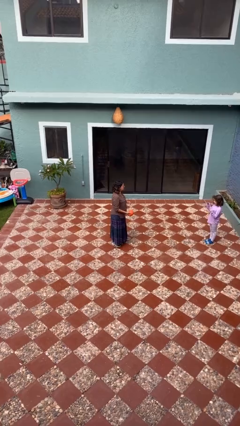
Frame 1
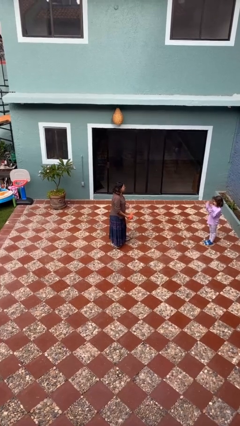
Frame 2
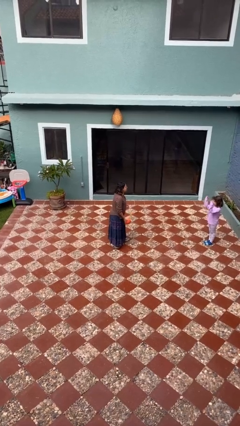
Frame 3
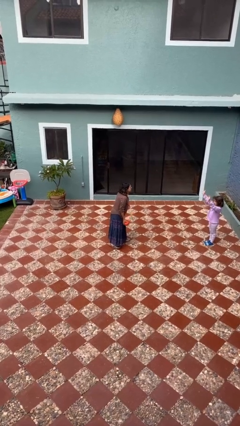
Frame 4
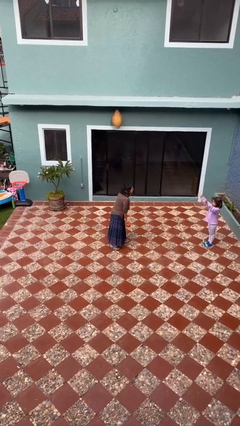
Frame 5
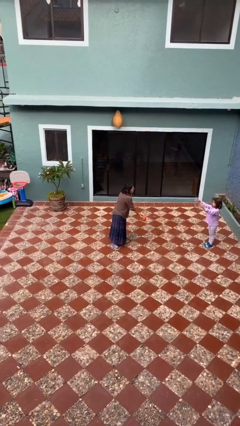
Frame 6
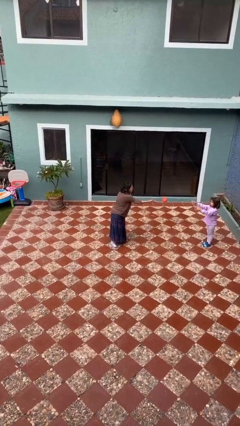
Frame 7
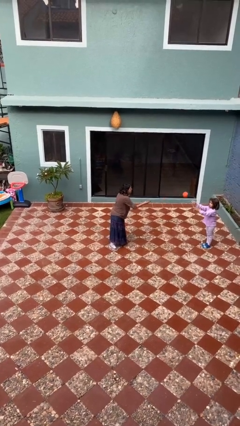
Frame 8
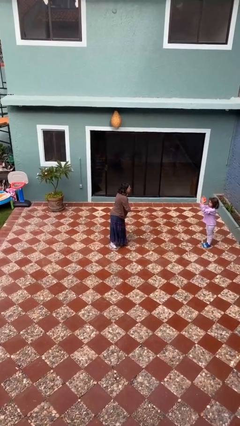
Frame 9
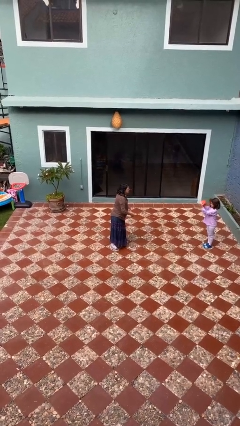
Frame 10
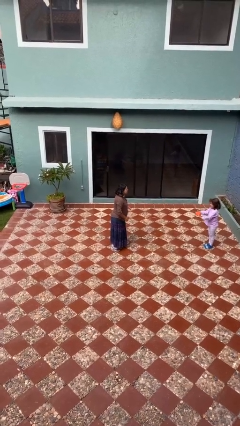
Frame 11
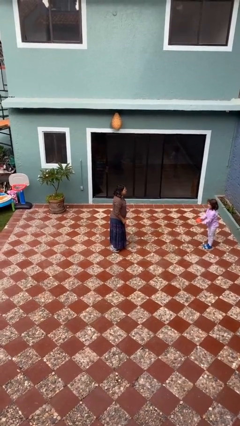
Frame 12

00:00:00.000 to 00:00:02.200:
person throws object to person

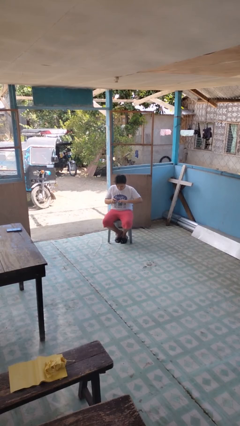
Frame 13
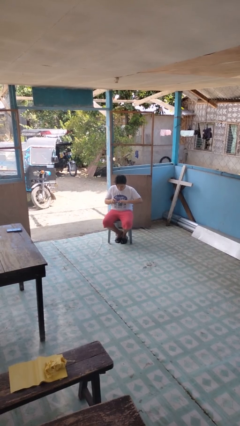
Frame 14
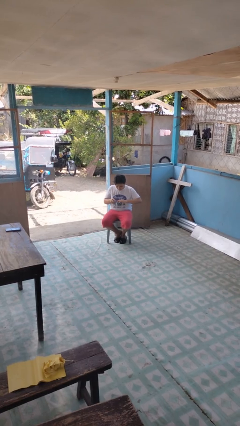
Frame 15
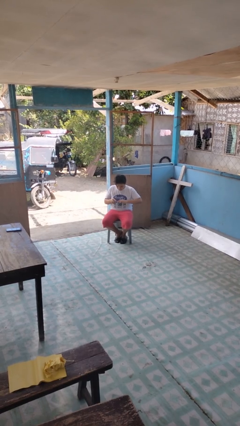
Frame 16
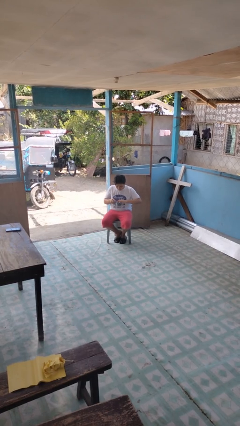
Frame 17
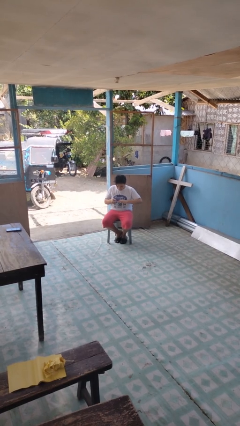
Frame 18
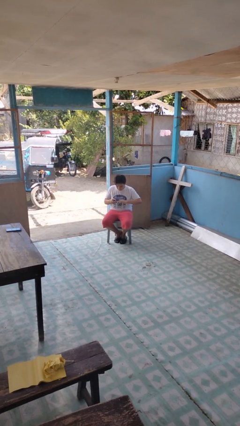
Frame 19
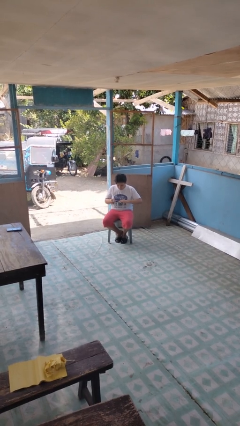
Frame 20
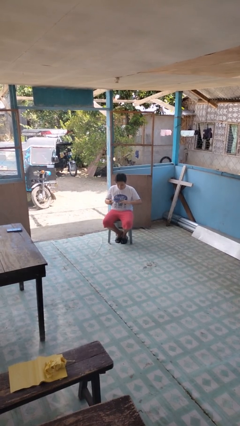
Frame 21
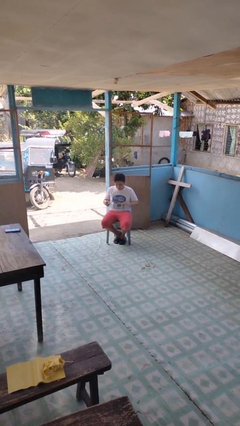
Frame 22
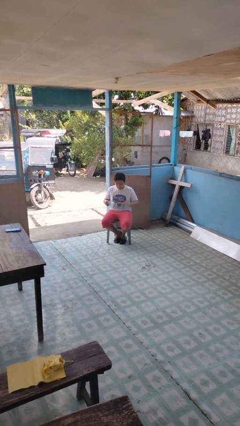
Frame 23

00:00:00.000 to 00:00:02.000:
person clips fingernails

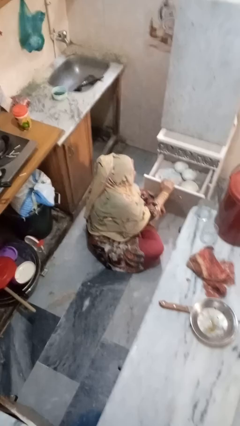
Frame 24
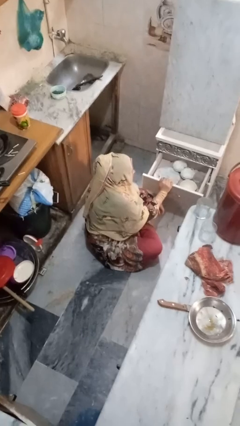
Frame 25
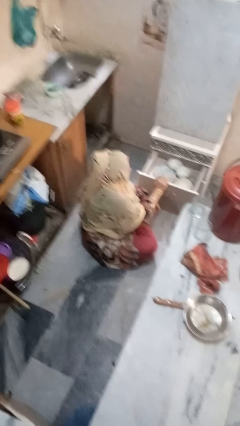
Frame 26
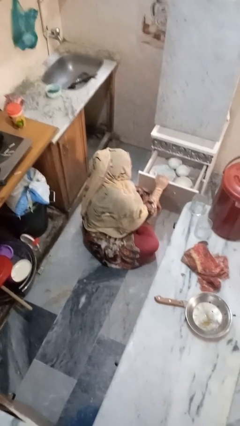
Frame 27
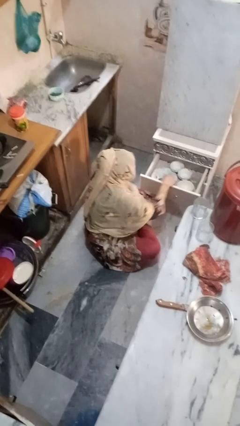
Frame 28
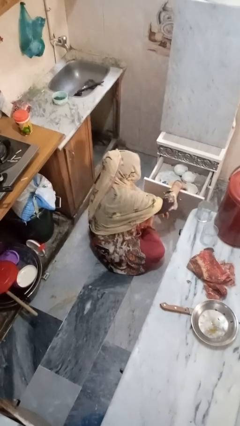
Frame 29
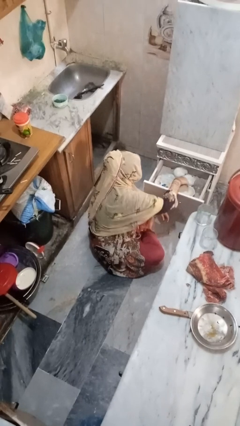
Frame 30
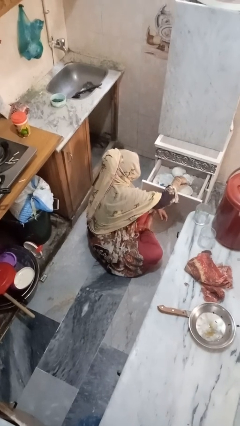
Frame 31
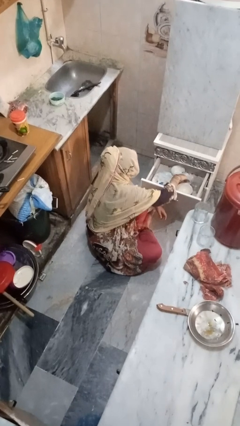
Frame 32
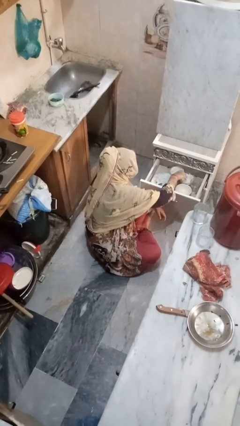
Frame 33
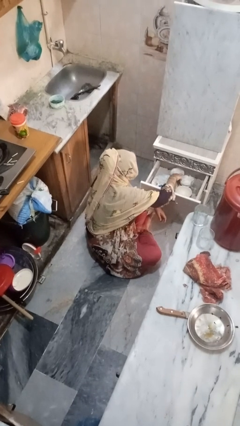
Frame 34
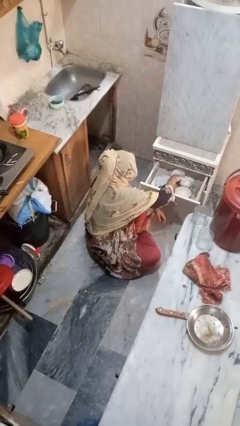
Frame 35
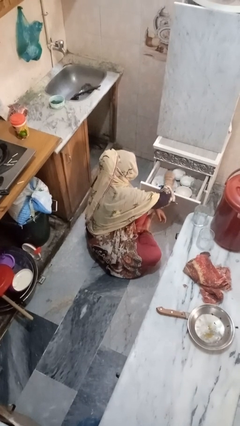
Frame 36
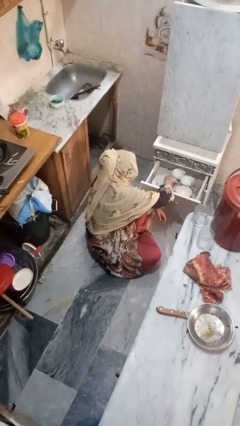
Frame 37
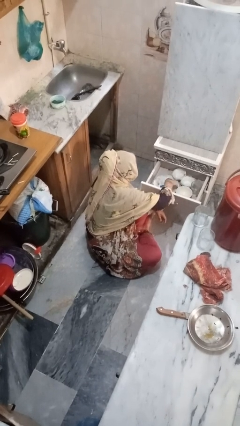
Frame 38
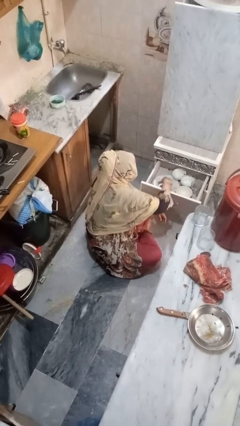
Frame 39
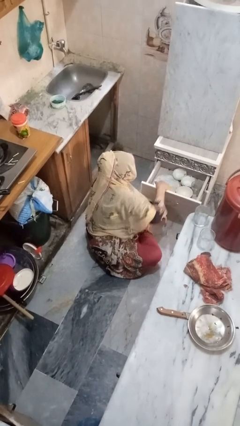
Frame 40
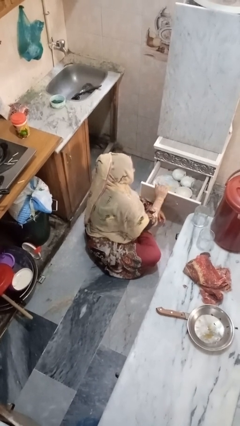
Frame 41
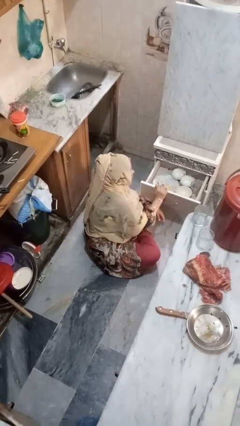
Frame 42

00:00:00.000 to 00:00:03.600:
person searches in kitchen drawer

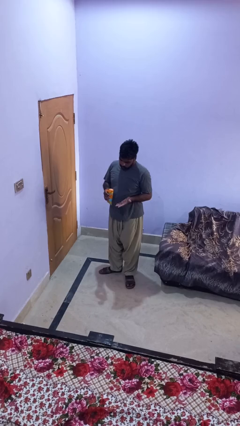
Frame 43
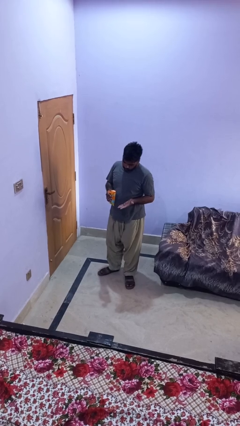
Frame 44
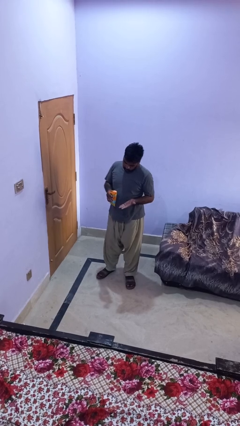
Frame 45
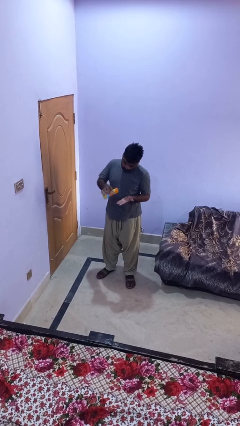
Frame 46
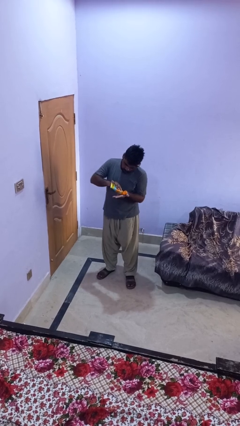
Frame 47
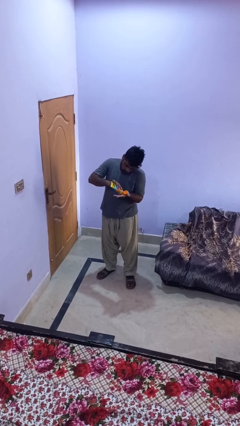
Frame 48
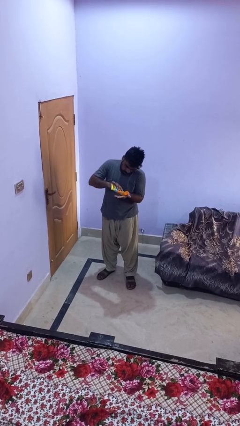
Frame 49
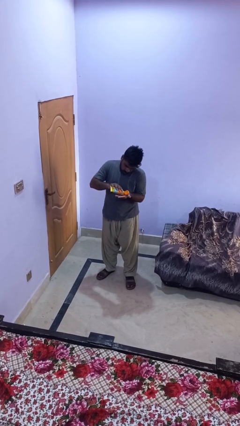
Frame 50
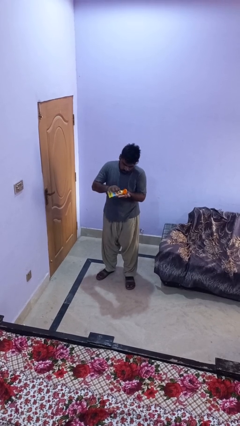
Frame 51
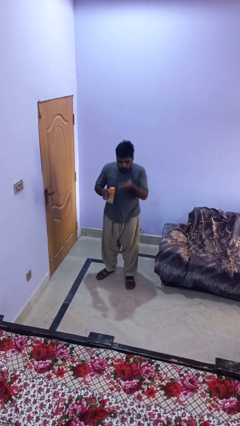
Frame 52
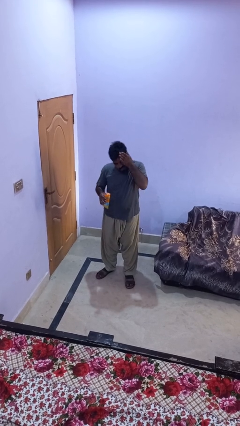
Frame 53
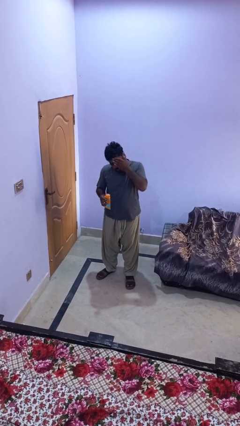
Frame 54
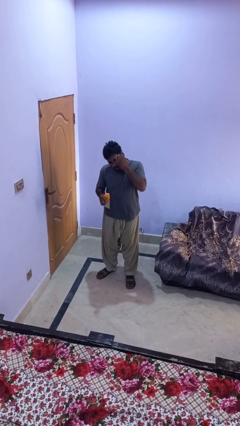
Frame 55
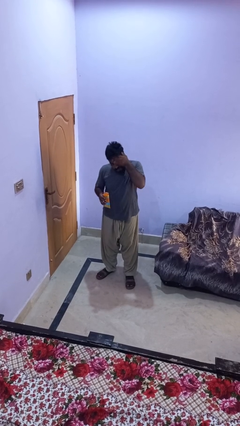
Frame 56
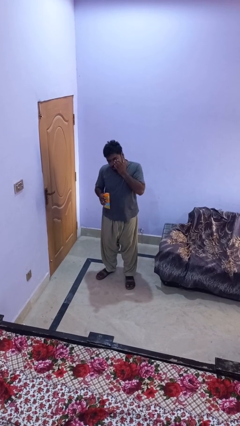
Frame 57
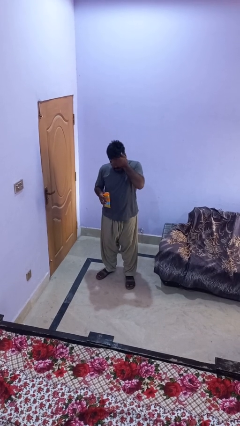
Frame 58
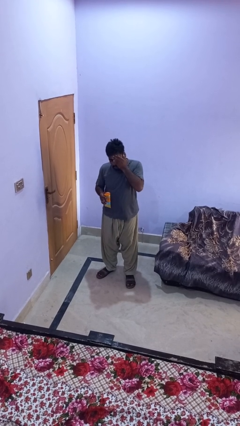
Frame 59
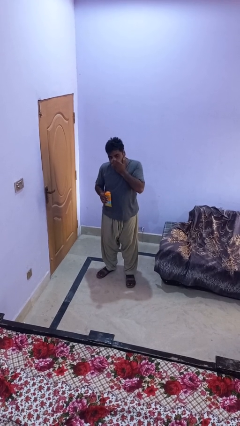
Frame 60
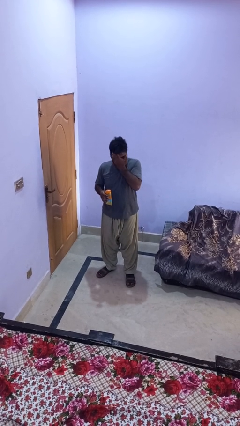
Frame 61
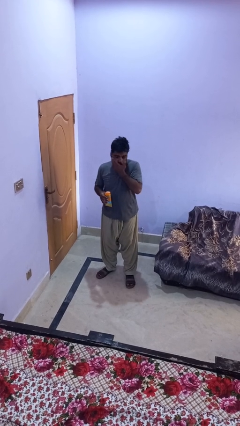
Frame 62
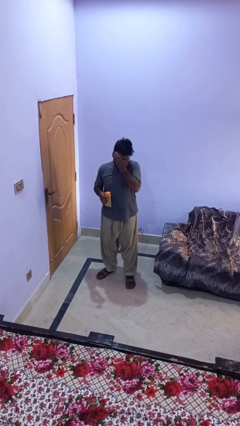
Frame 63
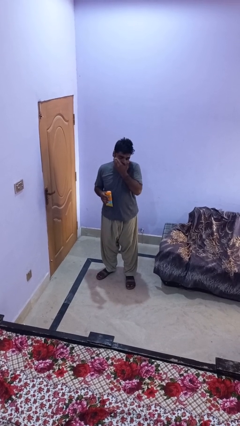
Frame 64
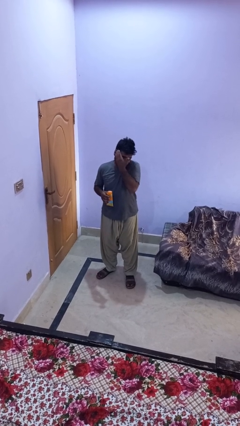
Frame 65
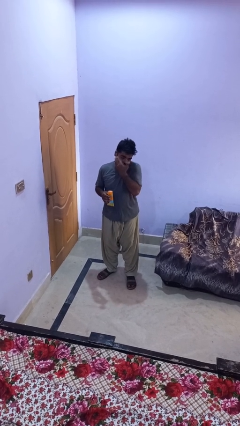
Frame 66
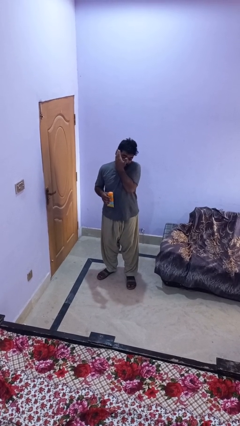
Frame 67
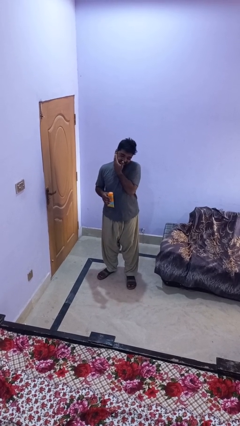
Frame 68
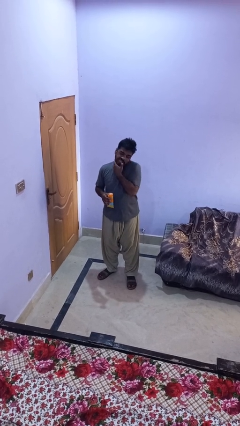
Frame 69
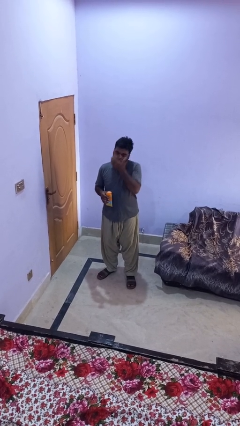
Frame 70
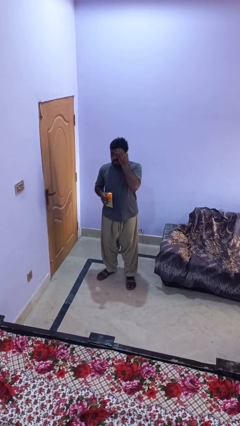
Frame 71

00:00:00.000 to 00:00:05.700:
person applies facial moisturizer

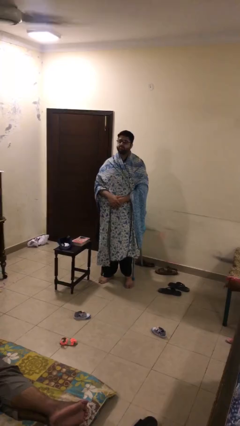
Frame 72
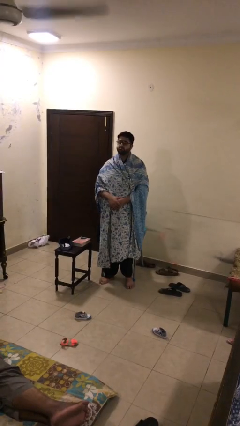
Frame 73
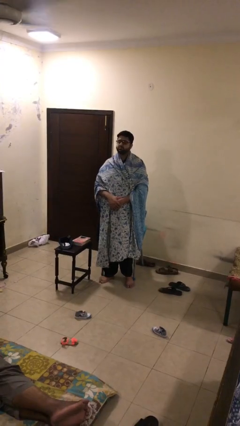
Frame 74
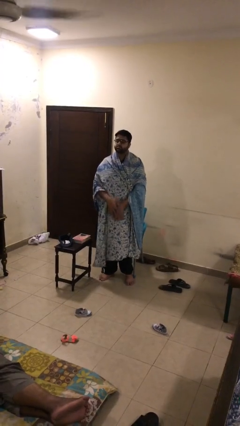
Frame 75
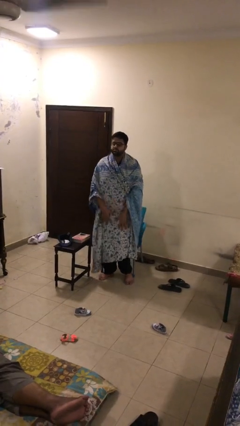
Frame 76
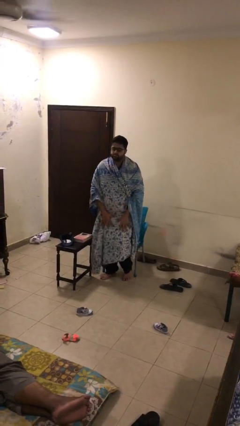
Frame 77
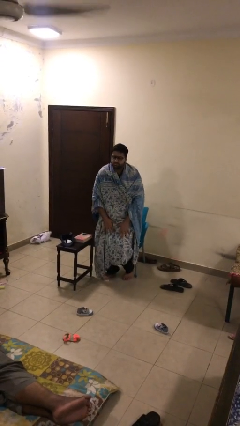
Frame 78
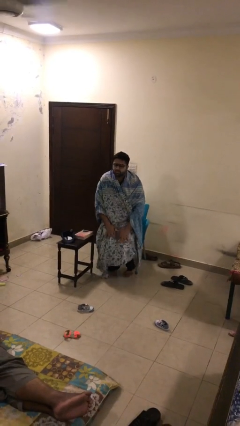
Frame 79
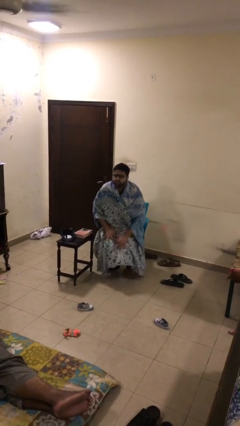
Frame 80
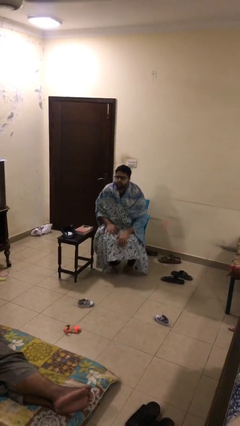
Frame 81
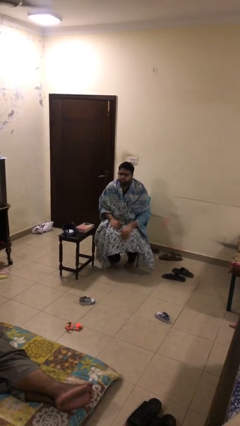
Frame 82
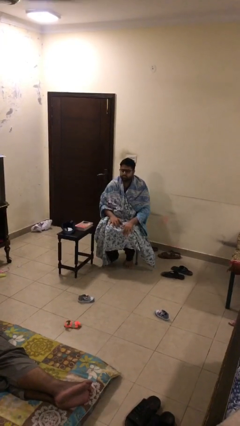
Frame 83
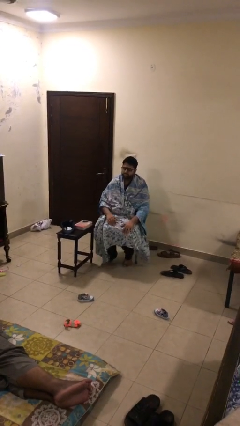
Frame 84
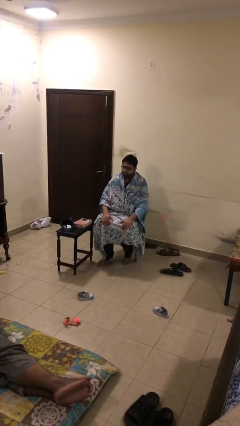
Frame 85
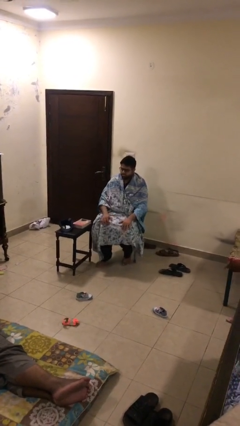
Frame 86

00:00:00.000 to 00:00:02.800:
person sits down

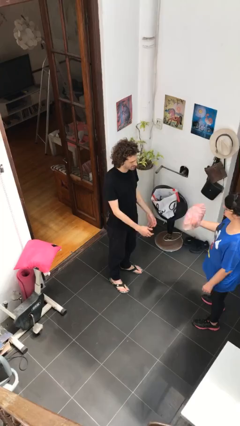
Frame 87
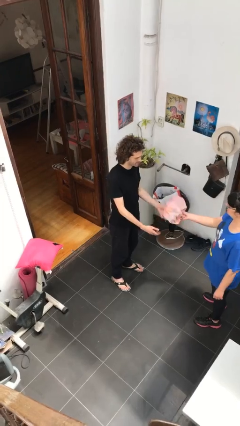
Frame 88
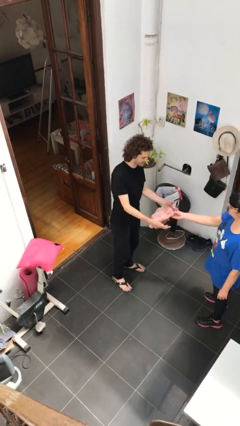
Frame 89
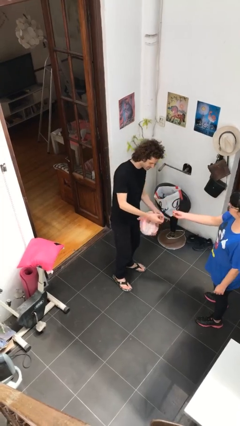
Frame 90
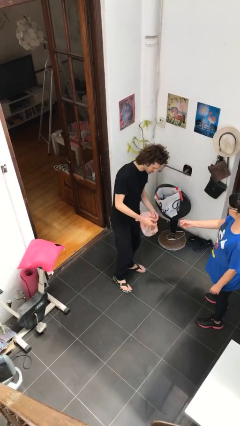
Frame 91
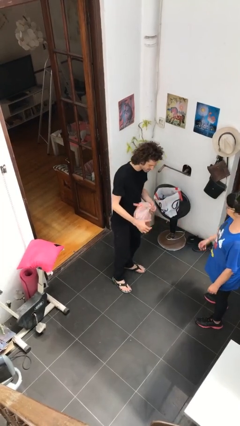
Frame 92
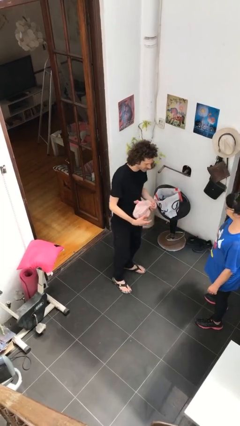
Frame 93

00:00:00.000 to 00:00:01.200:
person transfers object to person
